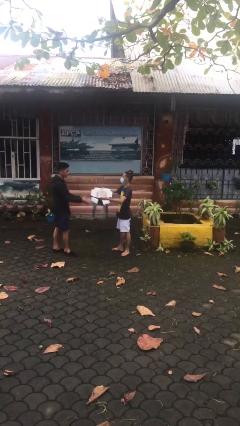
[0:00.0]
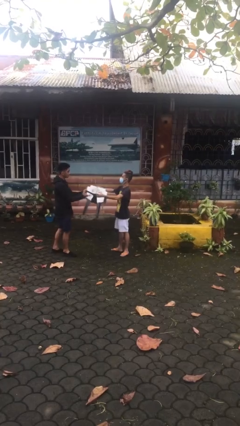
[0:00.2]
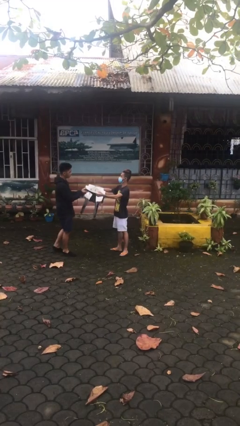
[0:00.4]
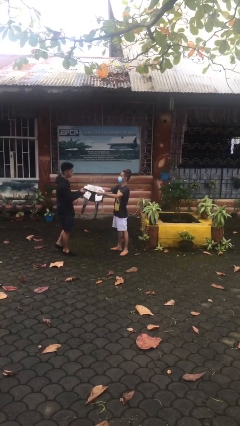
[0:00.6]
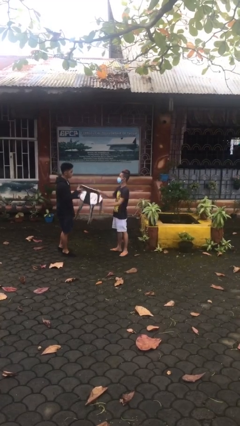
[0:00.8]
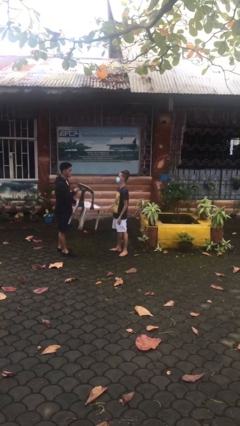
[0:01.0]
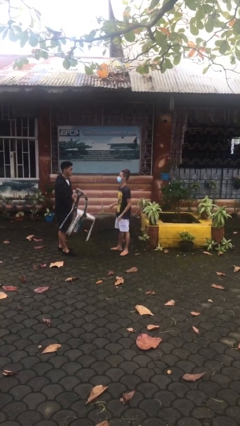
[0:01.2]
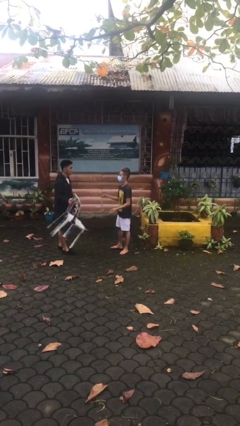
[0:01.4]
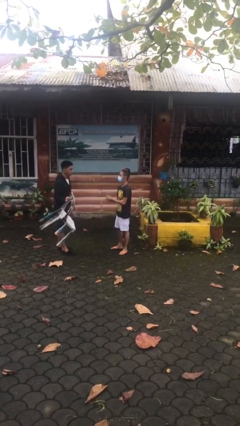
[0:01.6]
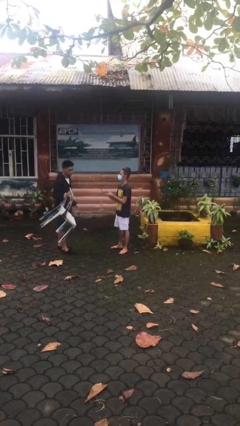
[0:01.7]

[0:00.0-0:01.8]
person transfers object to person

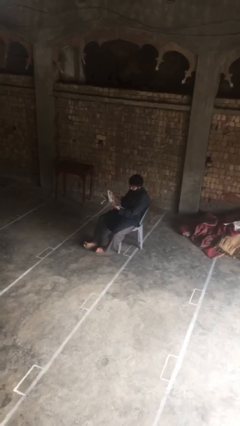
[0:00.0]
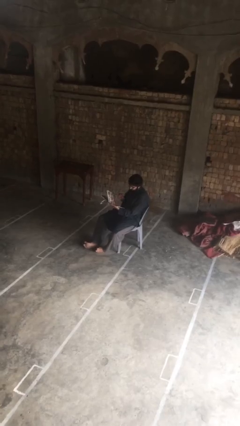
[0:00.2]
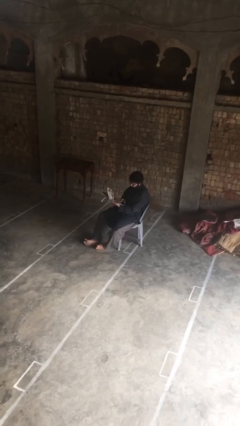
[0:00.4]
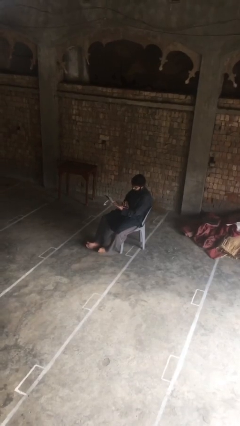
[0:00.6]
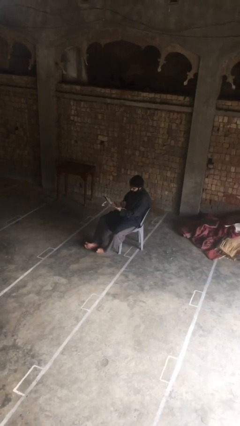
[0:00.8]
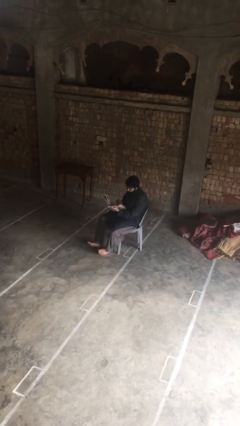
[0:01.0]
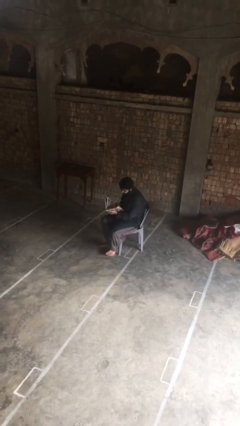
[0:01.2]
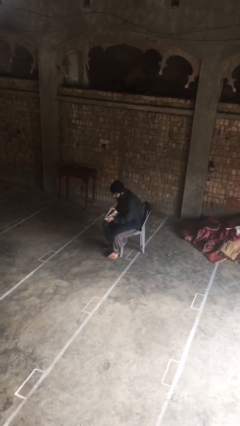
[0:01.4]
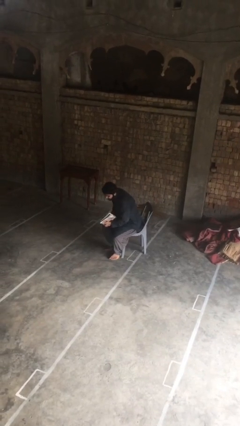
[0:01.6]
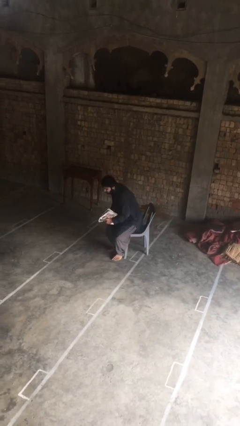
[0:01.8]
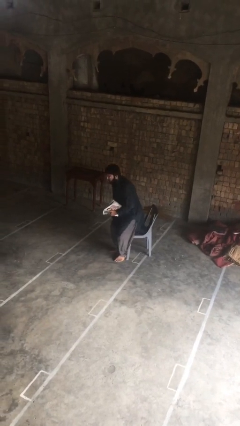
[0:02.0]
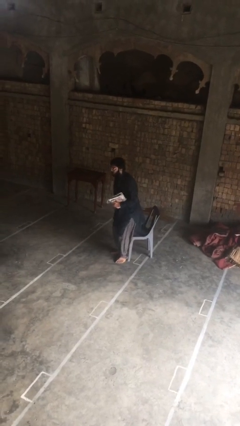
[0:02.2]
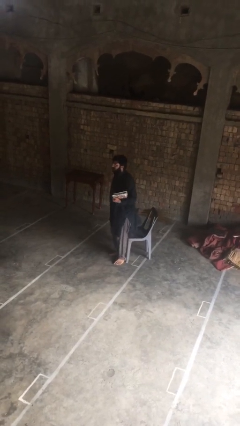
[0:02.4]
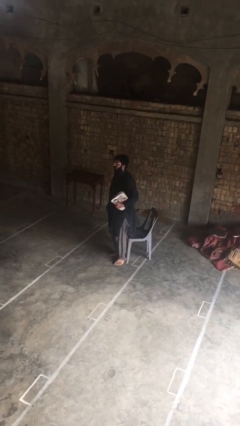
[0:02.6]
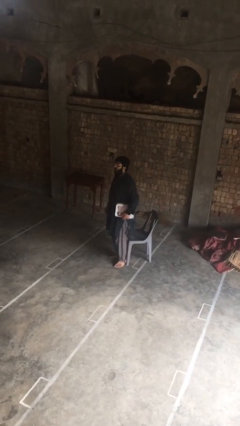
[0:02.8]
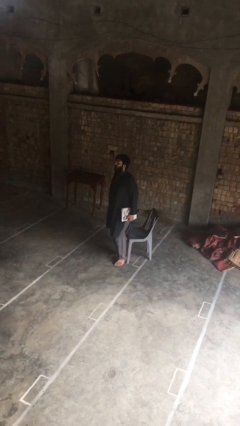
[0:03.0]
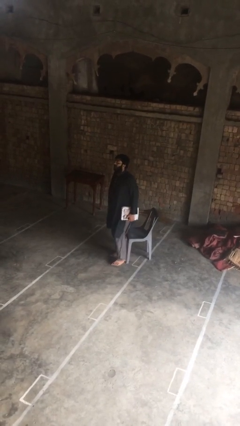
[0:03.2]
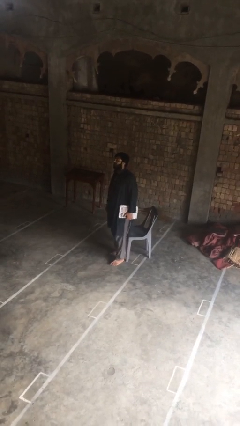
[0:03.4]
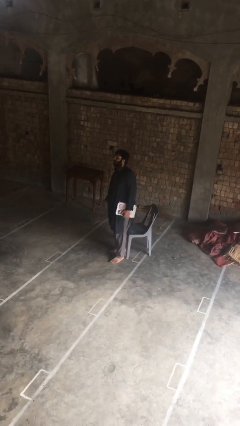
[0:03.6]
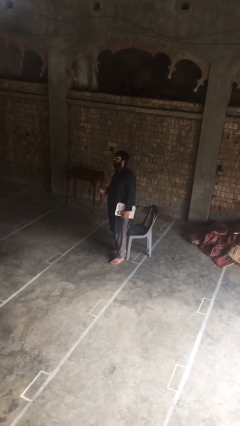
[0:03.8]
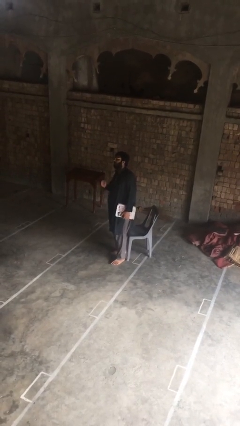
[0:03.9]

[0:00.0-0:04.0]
person stands up

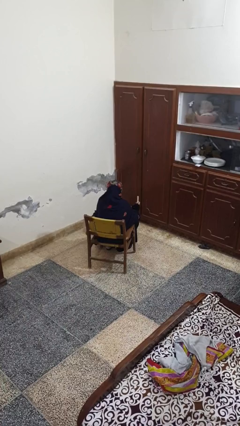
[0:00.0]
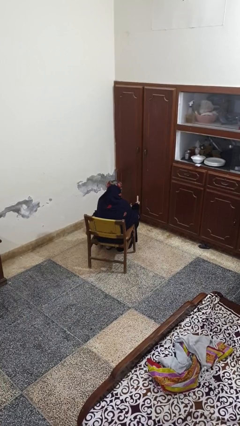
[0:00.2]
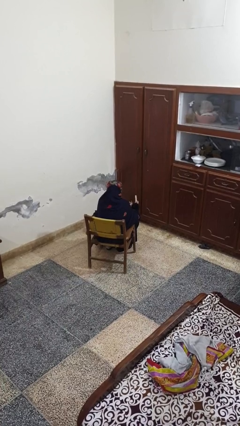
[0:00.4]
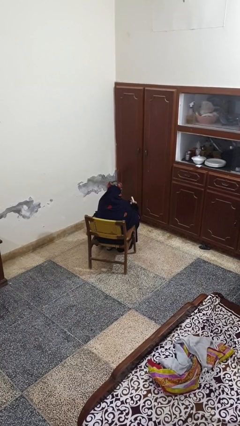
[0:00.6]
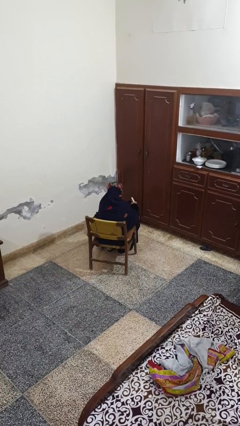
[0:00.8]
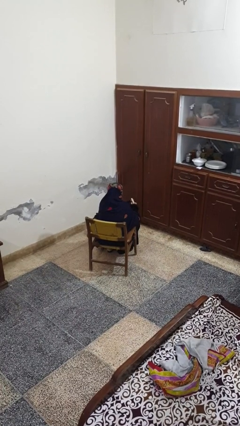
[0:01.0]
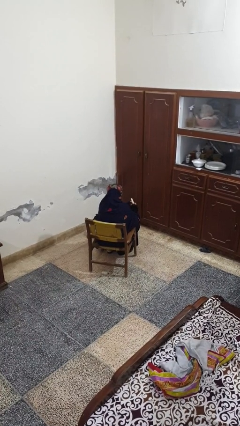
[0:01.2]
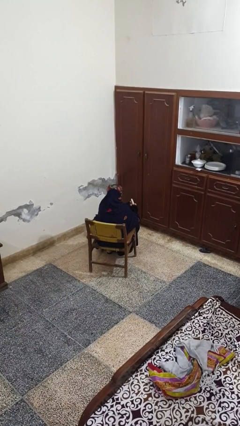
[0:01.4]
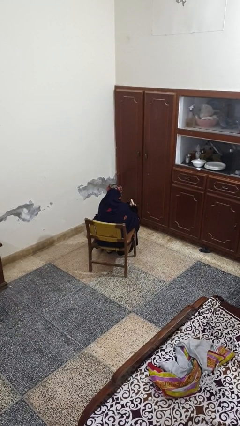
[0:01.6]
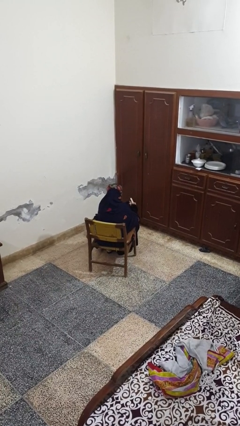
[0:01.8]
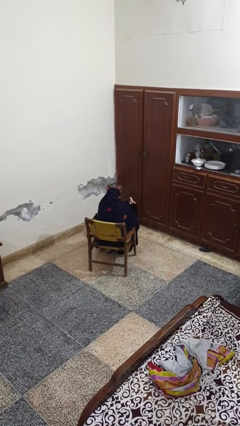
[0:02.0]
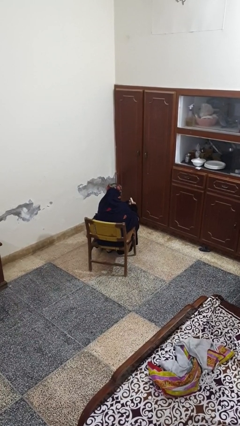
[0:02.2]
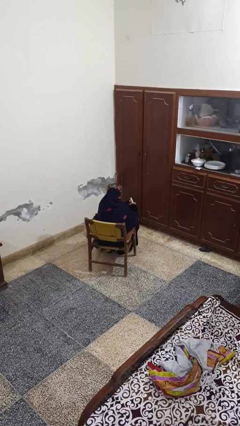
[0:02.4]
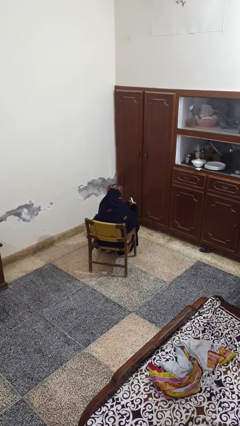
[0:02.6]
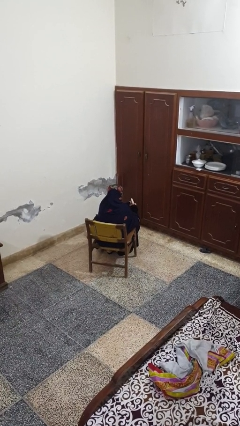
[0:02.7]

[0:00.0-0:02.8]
person files fingernails

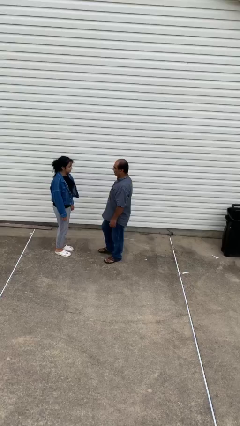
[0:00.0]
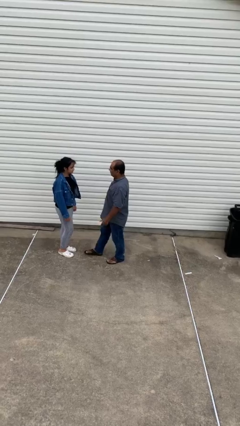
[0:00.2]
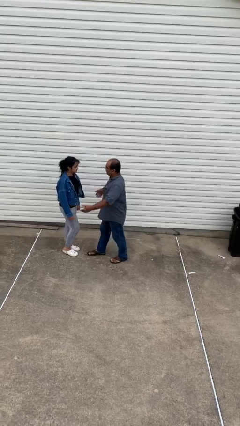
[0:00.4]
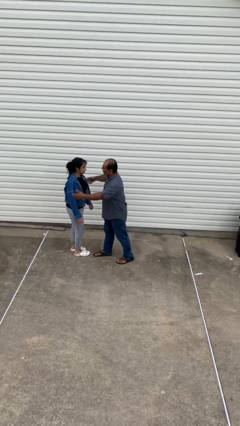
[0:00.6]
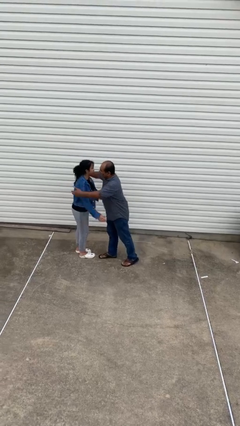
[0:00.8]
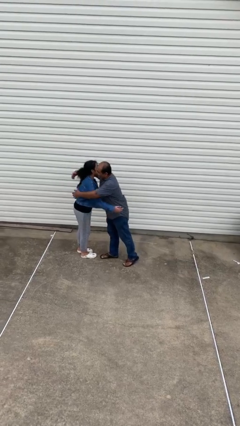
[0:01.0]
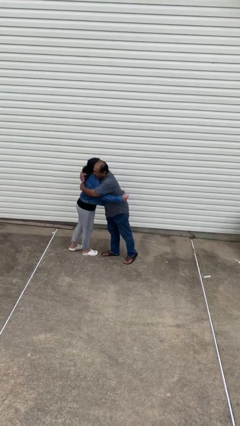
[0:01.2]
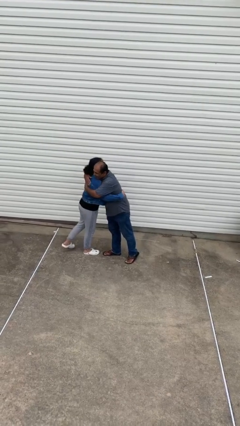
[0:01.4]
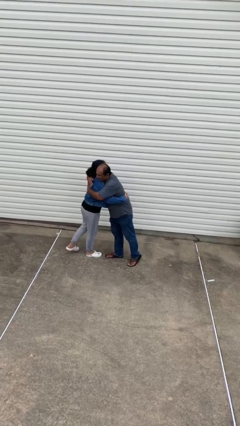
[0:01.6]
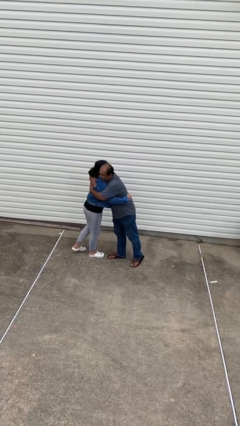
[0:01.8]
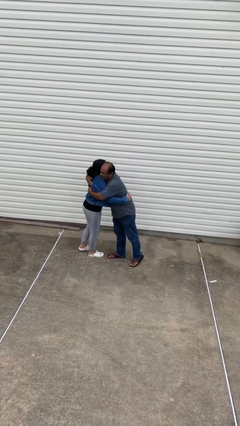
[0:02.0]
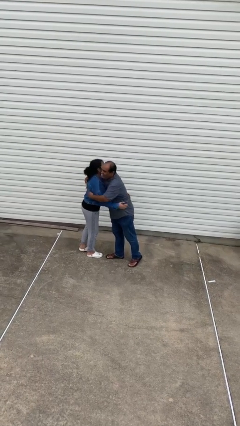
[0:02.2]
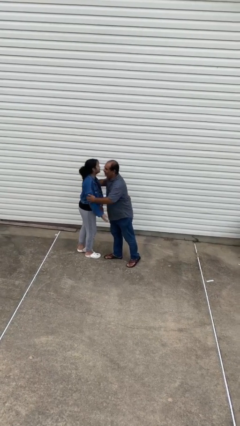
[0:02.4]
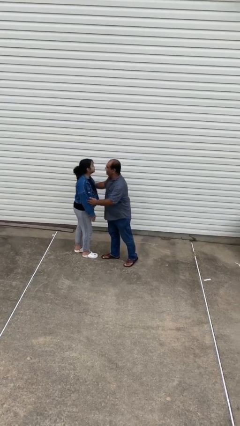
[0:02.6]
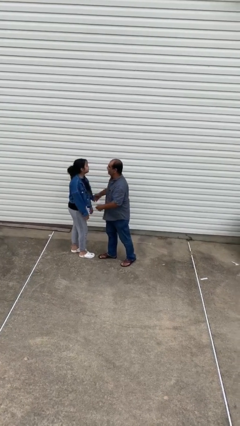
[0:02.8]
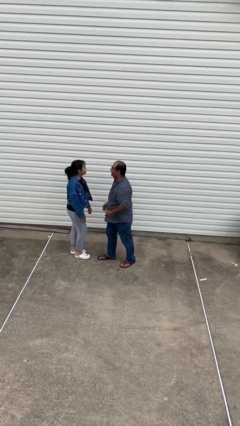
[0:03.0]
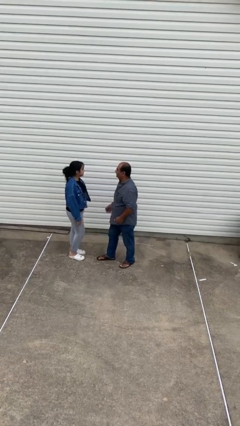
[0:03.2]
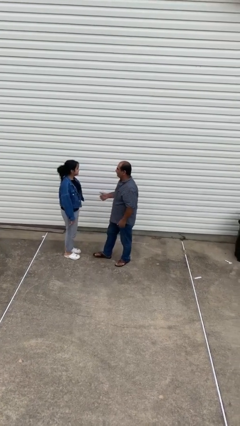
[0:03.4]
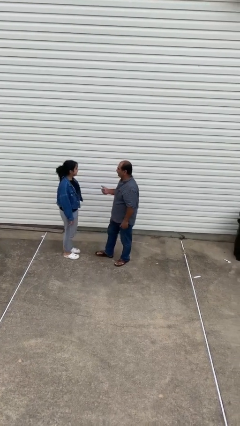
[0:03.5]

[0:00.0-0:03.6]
person embraces person

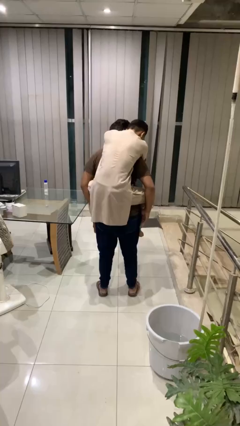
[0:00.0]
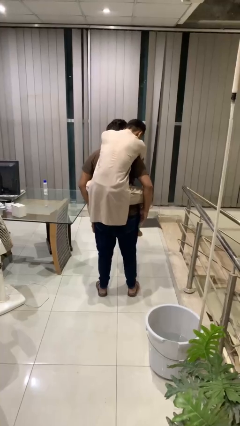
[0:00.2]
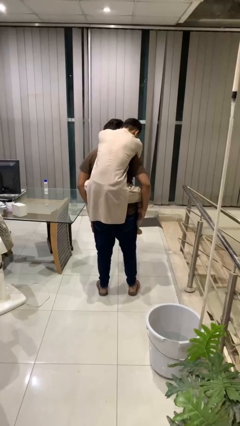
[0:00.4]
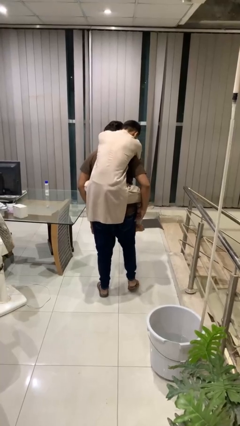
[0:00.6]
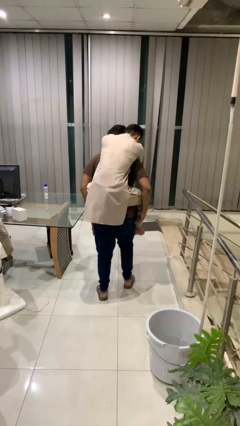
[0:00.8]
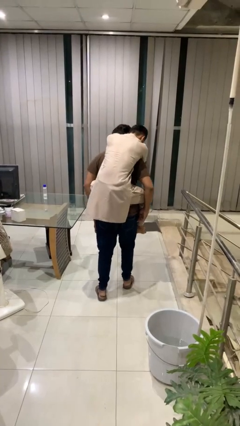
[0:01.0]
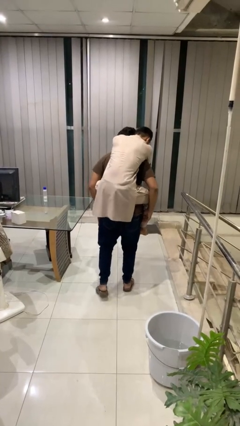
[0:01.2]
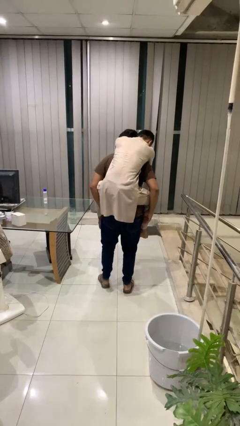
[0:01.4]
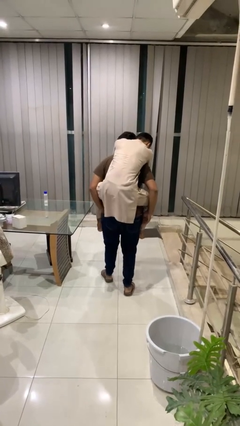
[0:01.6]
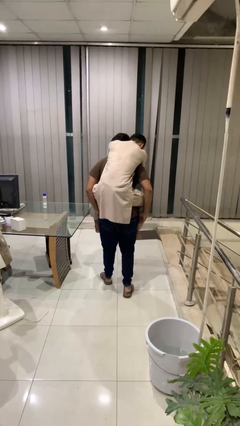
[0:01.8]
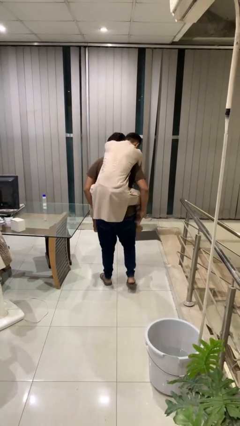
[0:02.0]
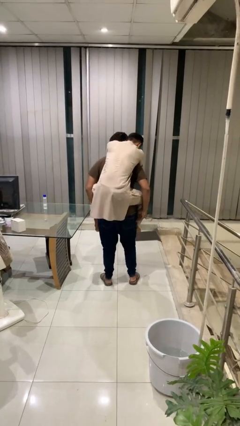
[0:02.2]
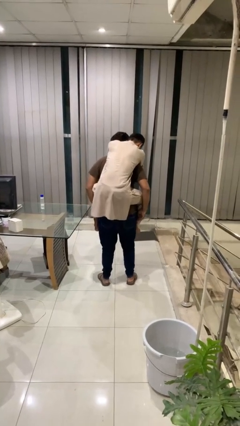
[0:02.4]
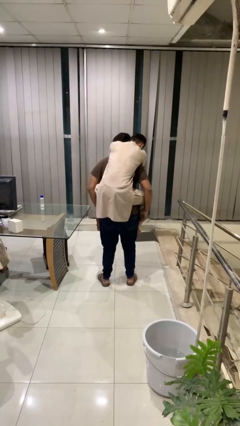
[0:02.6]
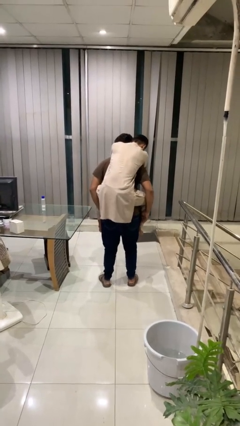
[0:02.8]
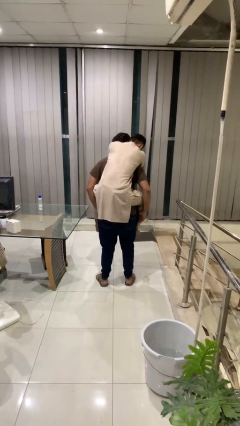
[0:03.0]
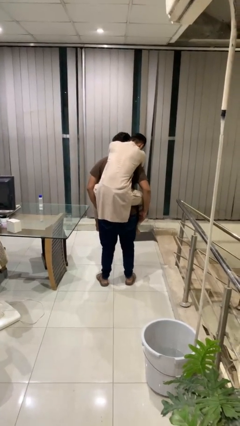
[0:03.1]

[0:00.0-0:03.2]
person carries person on back

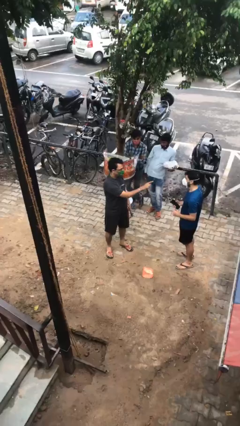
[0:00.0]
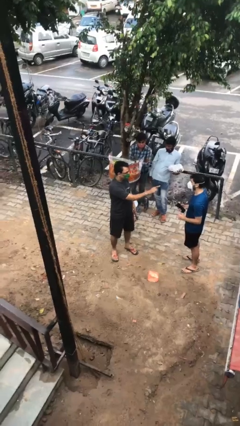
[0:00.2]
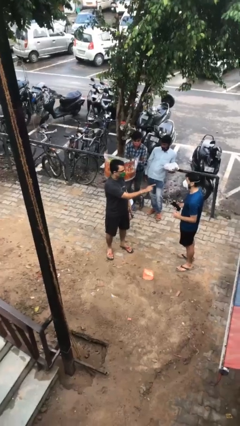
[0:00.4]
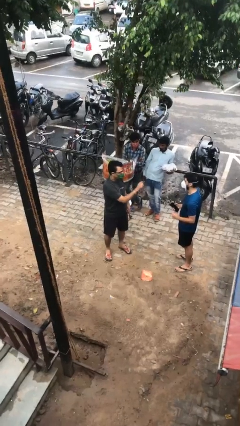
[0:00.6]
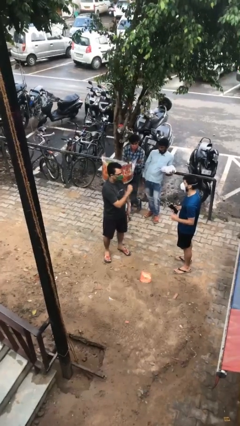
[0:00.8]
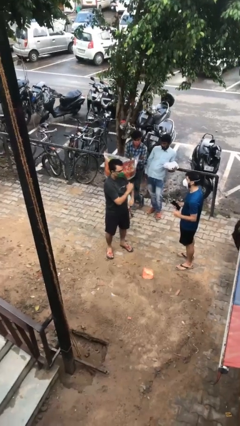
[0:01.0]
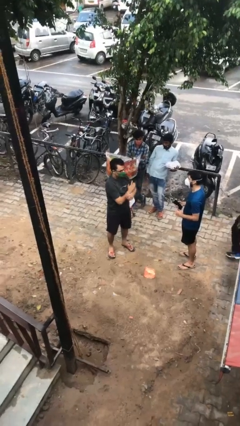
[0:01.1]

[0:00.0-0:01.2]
person points at person

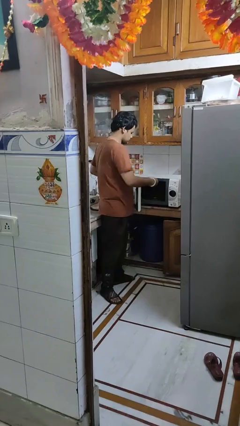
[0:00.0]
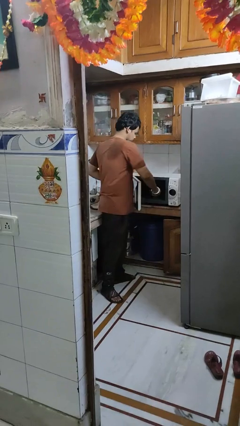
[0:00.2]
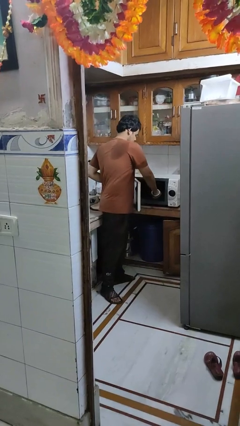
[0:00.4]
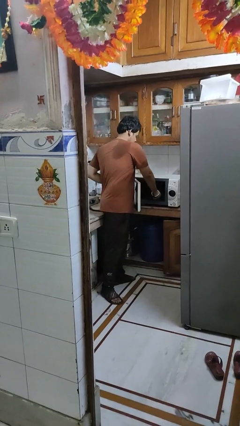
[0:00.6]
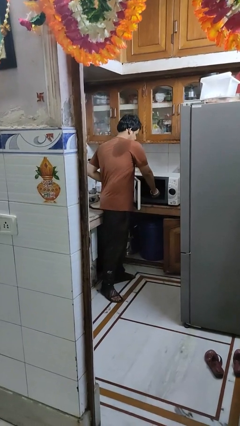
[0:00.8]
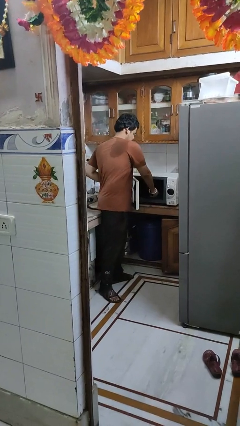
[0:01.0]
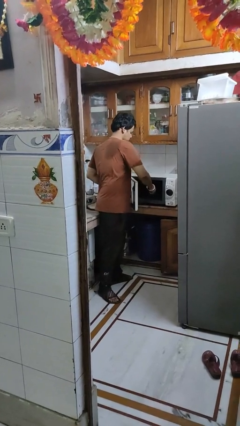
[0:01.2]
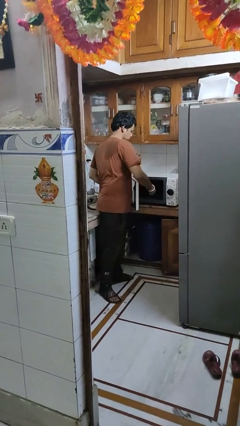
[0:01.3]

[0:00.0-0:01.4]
person puts object into microwave
